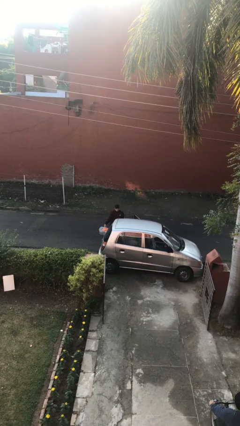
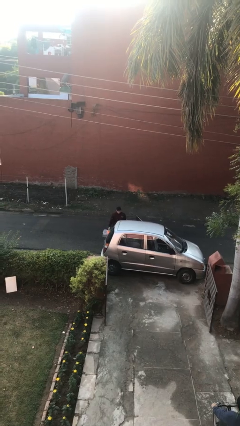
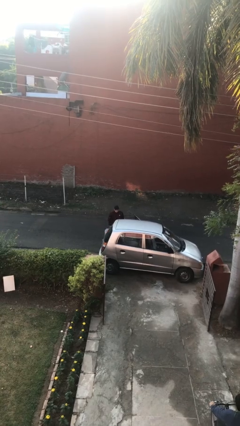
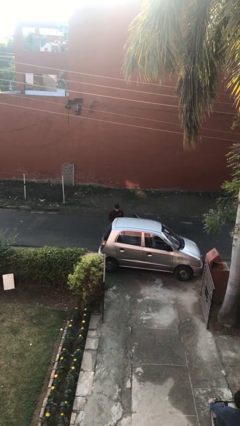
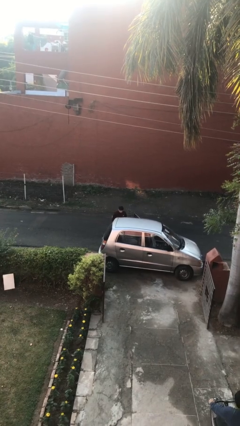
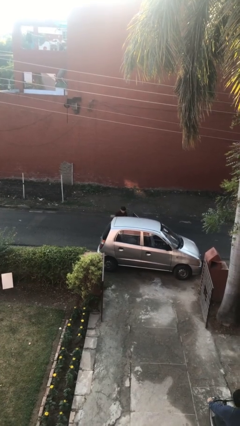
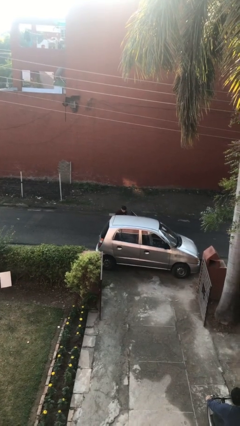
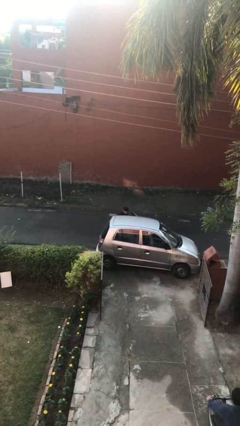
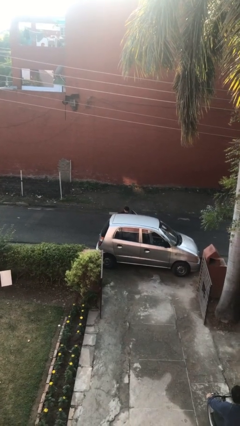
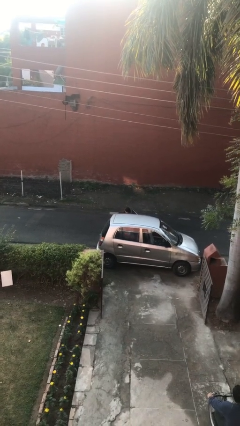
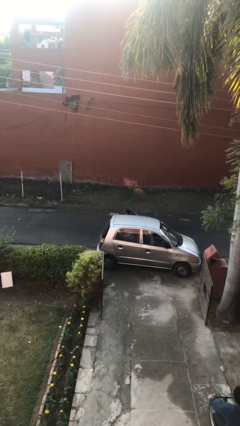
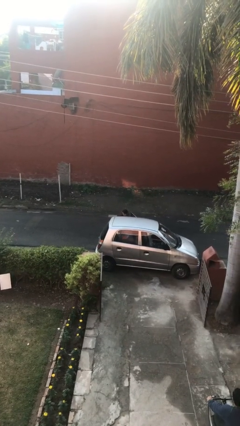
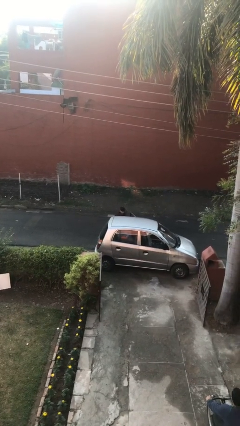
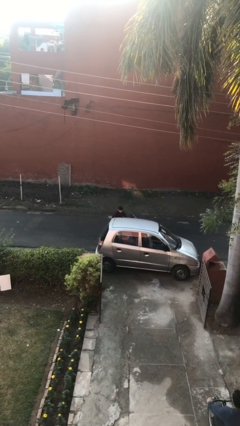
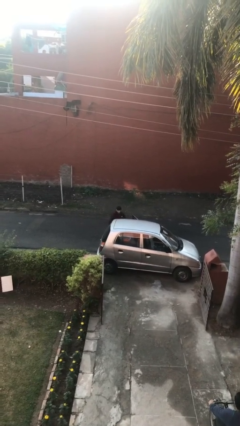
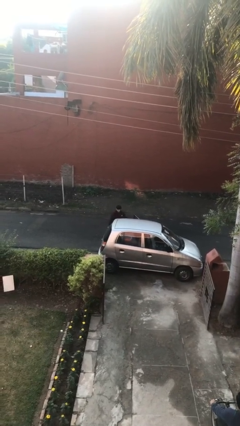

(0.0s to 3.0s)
person loads car

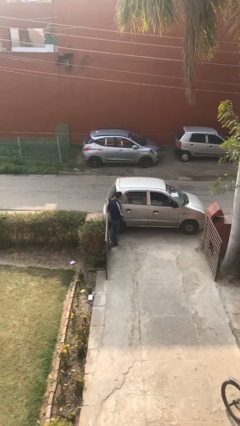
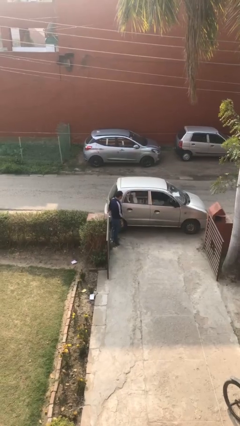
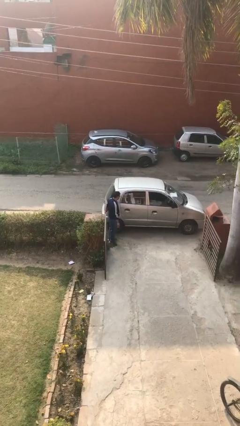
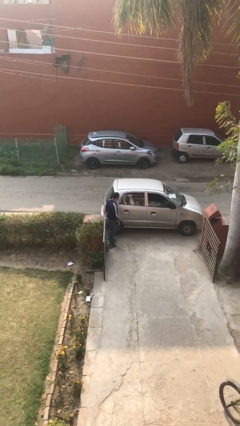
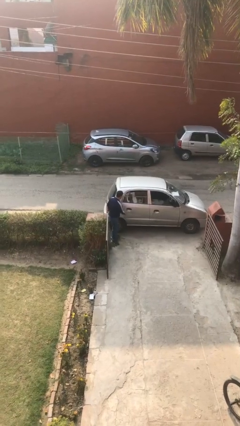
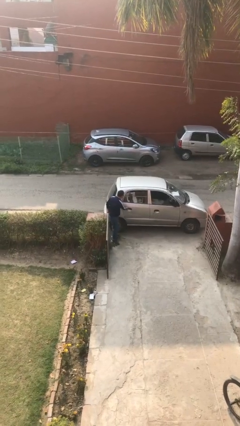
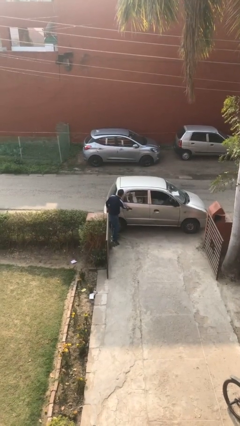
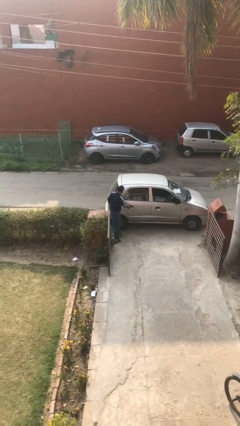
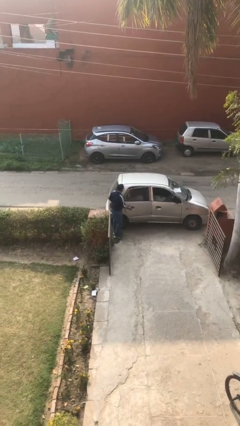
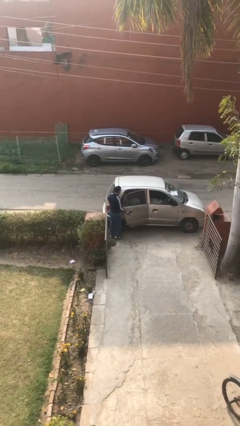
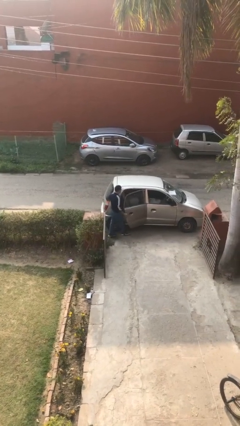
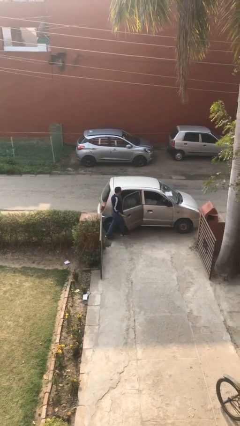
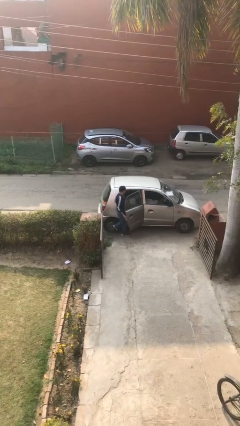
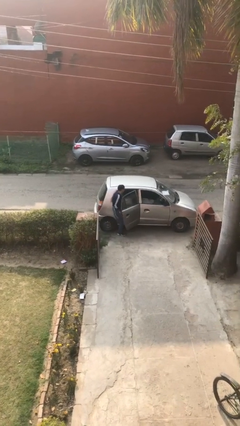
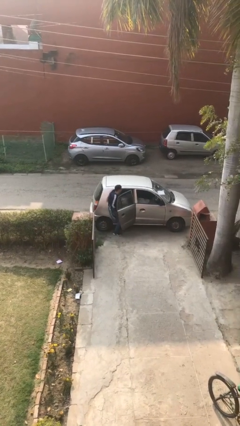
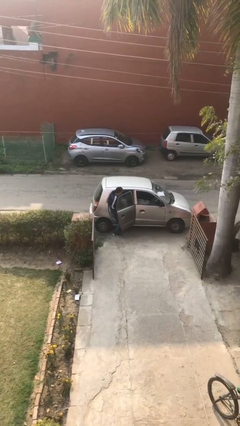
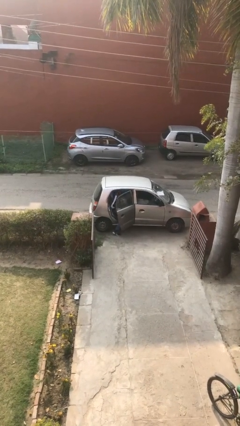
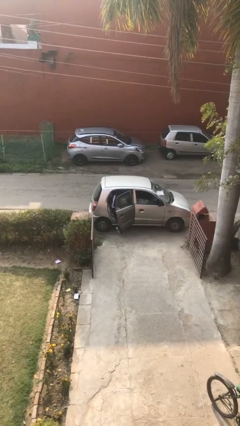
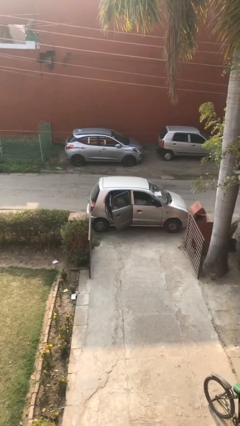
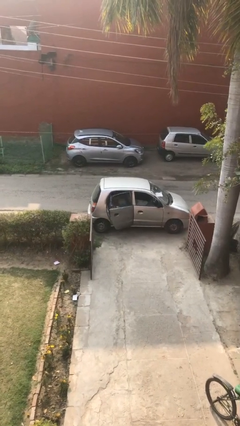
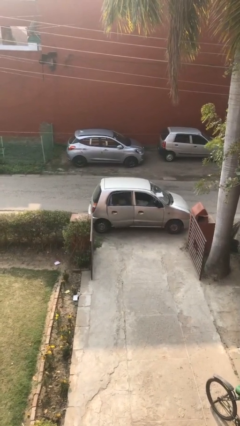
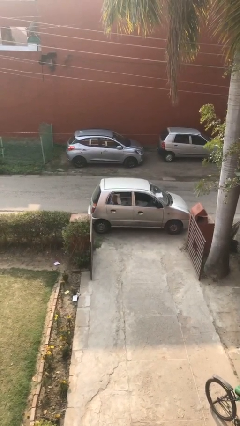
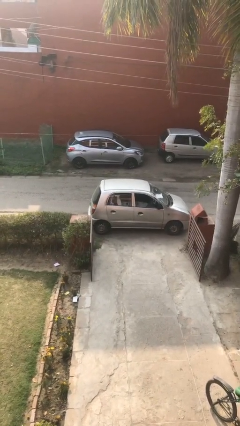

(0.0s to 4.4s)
person enters car

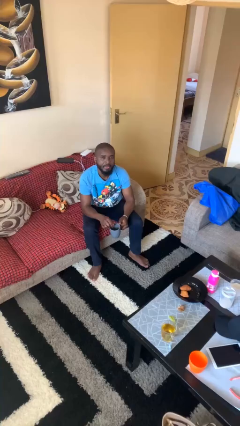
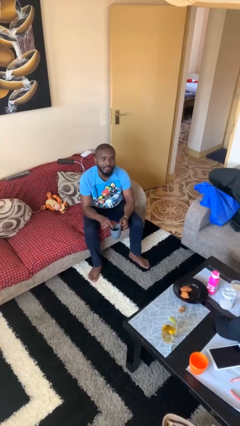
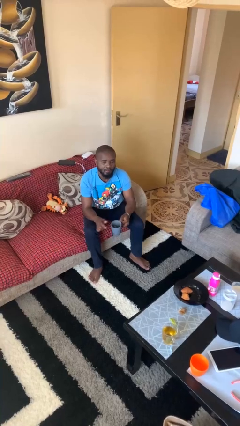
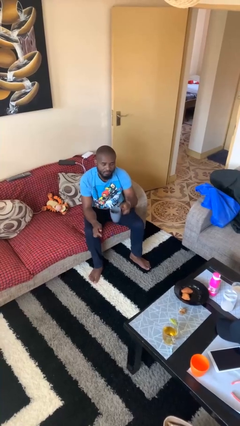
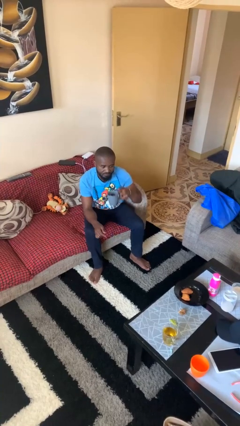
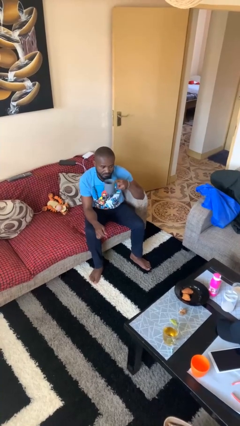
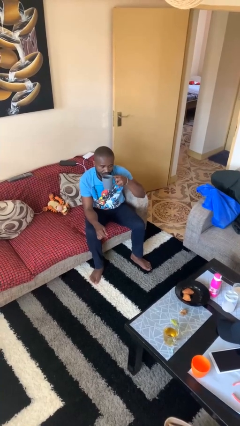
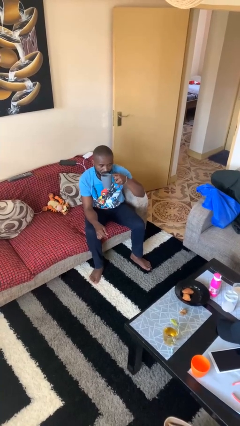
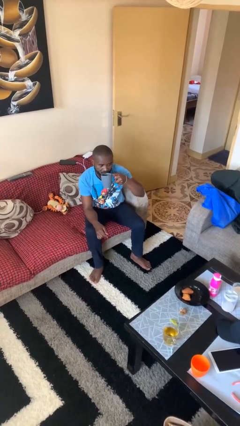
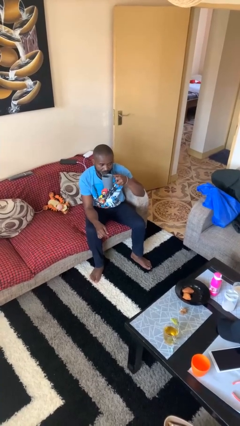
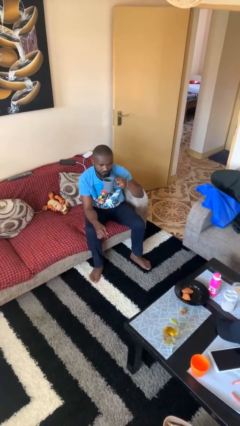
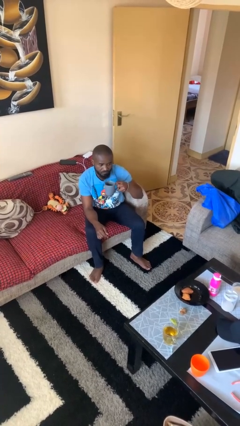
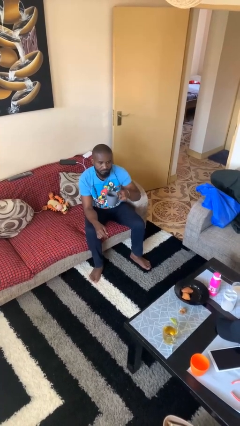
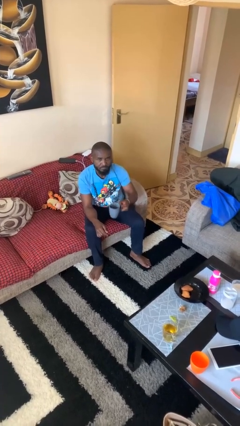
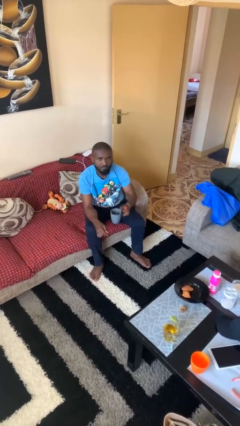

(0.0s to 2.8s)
person drinks from mug

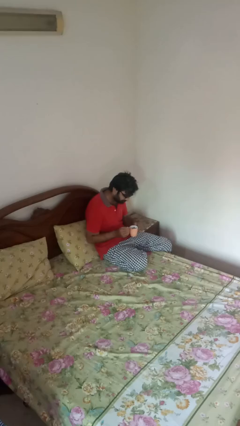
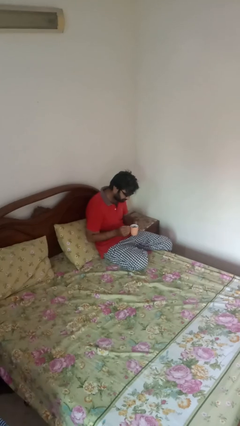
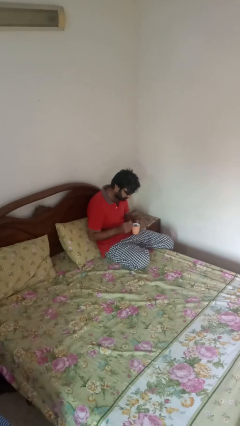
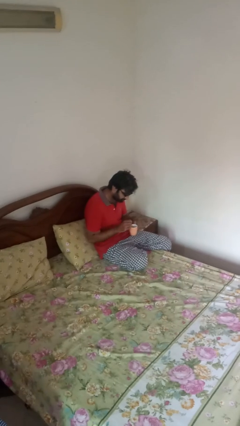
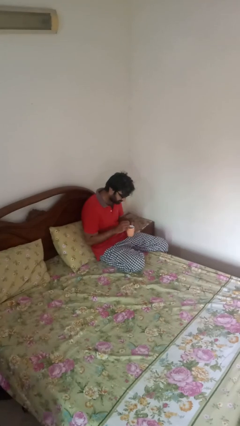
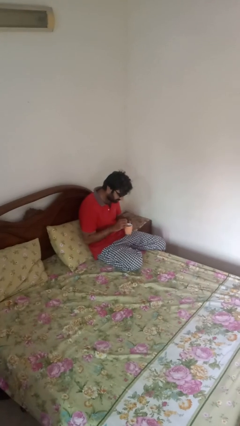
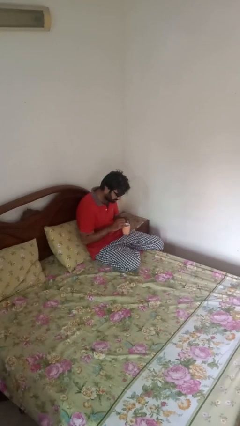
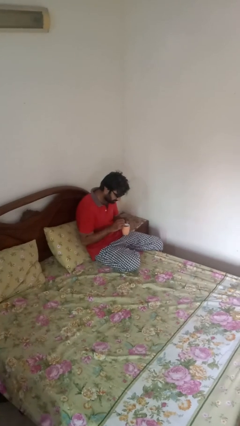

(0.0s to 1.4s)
person stirs mug

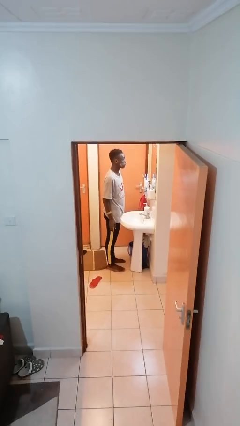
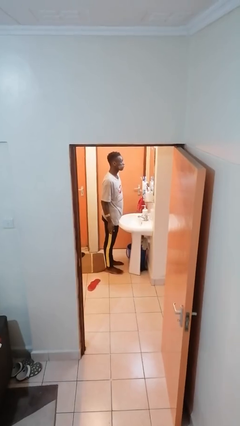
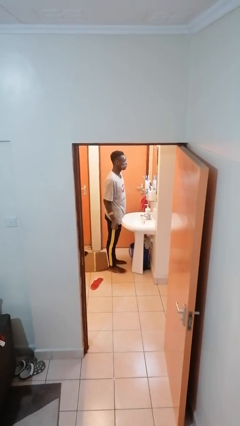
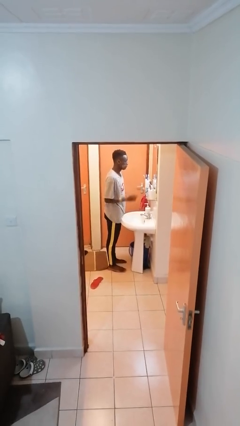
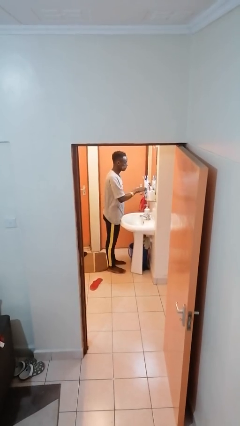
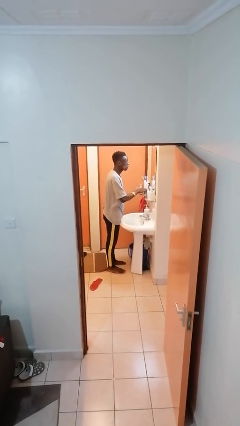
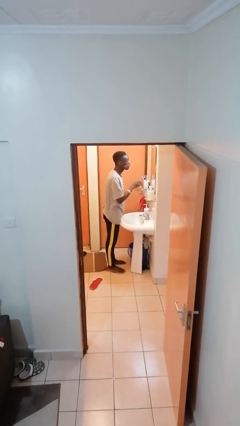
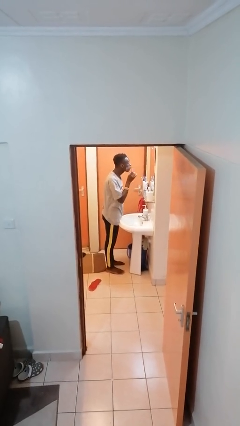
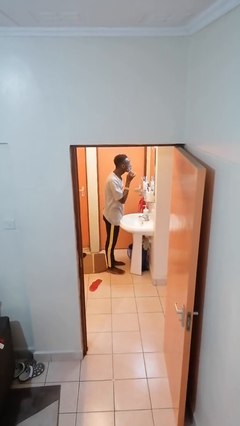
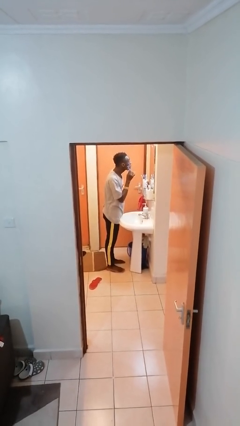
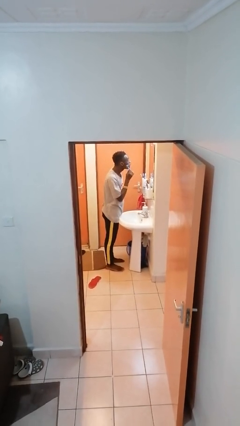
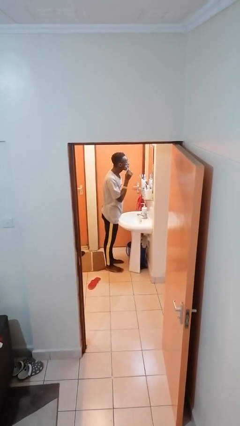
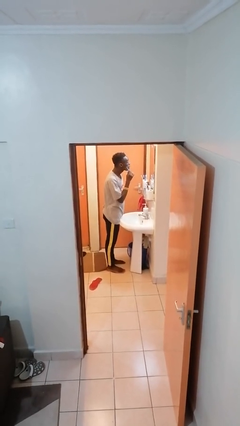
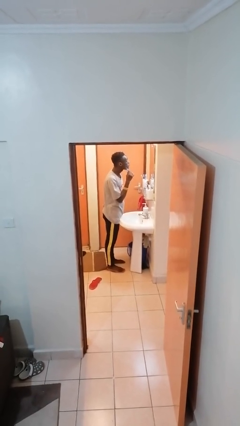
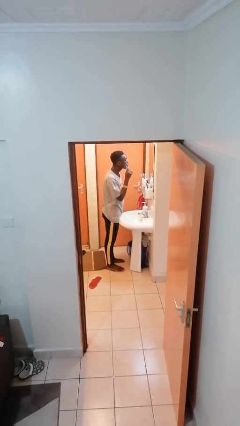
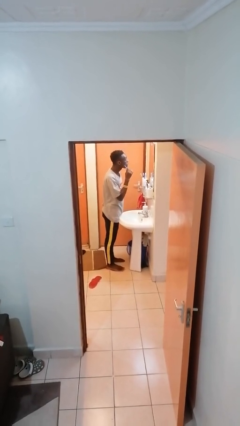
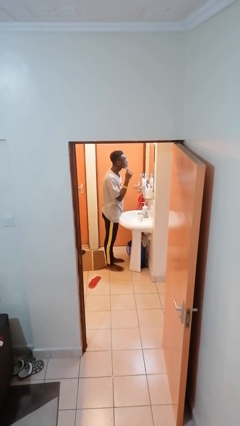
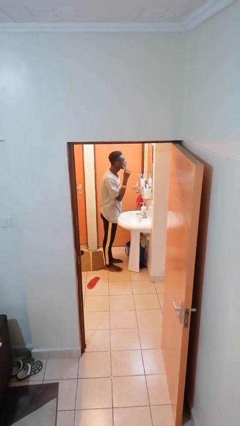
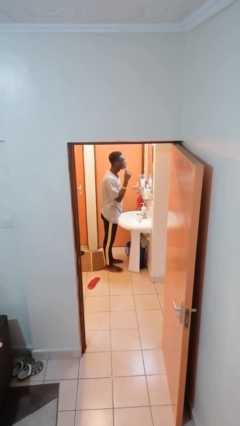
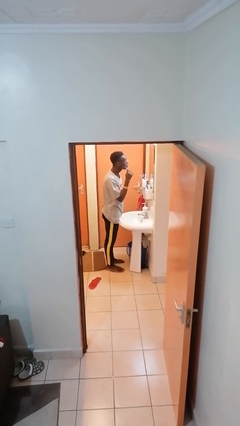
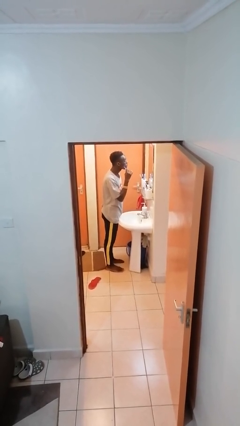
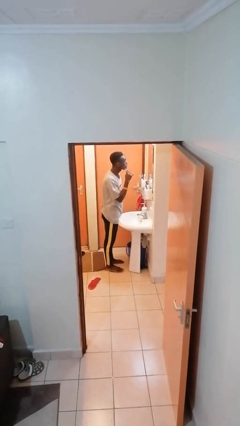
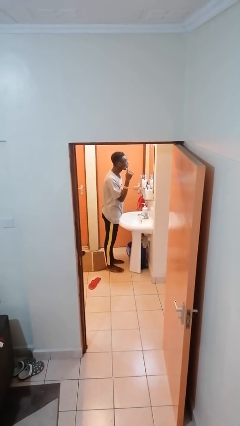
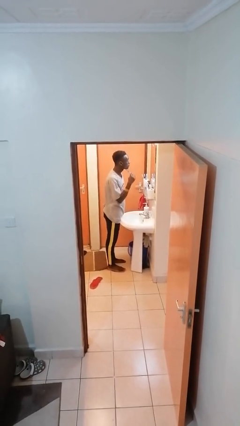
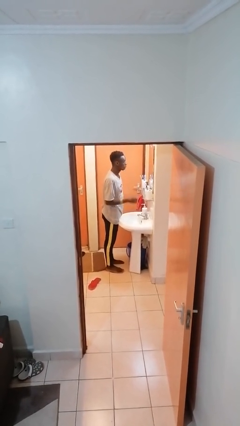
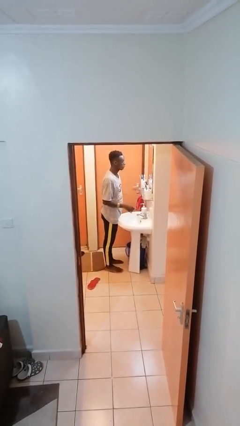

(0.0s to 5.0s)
person shaves face

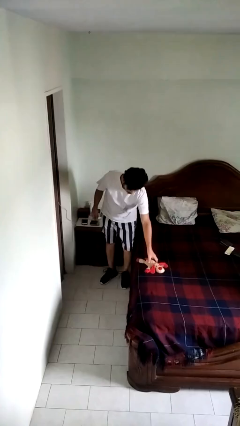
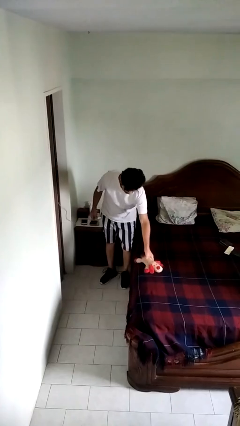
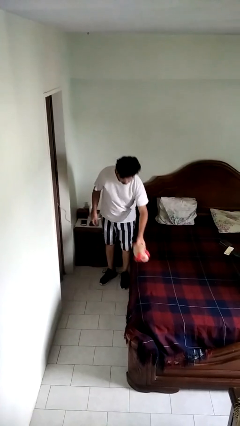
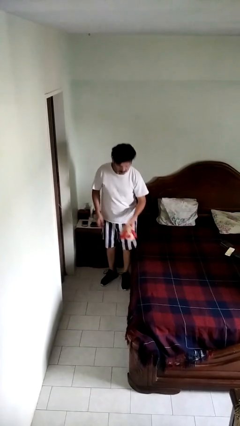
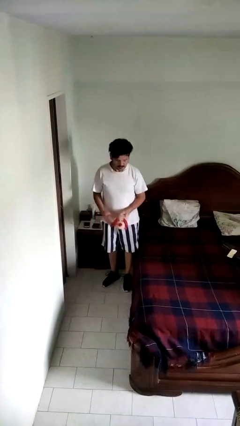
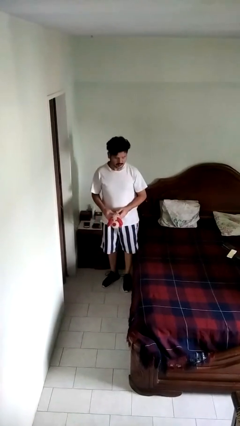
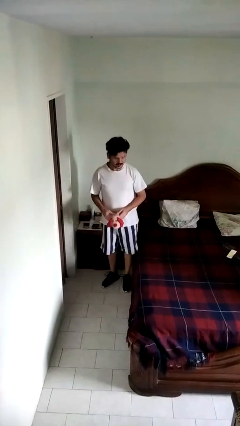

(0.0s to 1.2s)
person picks up object from bed
